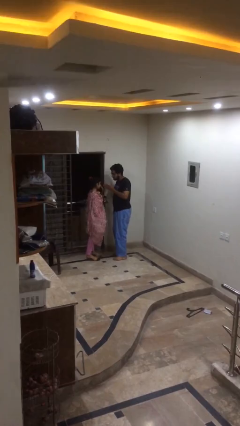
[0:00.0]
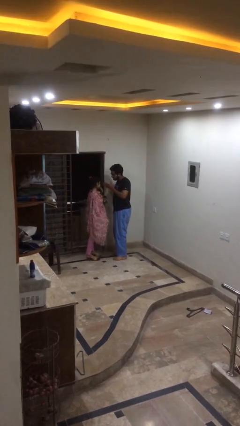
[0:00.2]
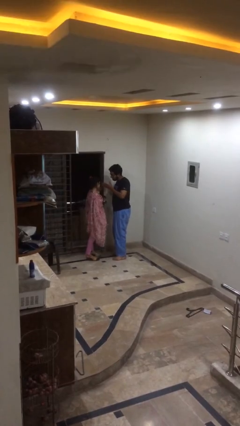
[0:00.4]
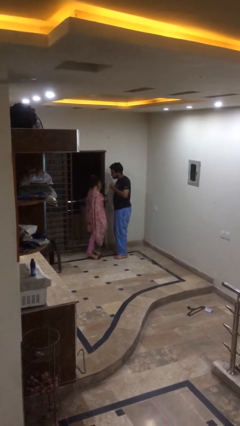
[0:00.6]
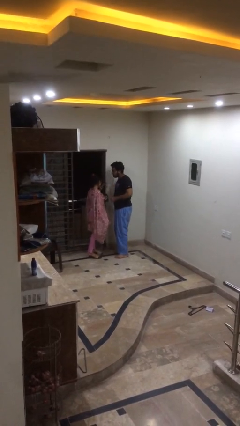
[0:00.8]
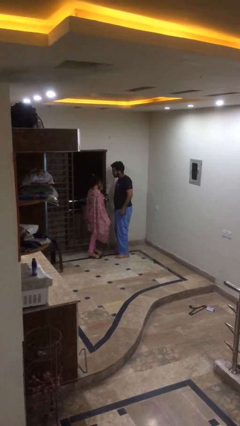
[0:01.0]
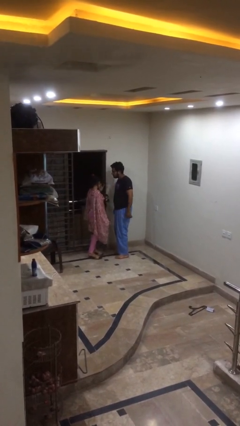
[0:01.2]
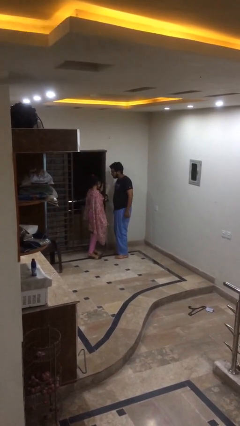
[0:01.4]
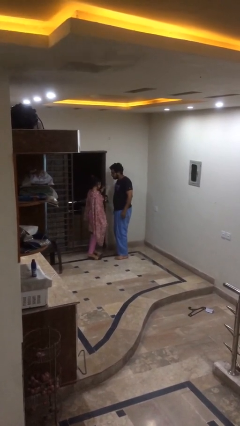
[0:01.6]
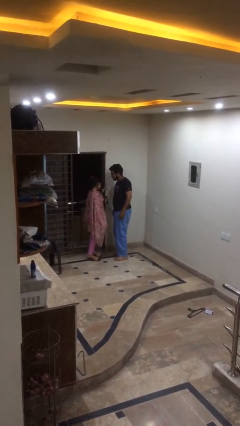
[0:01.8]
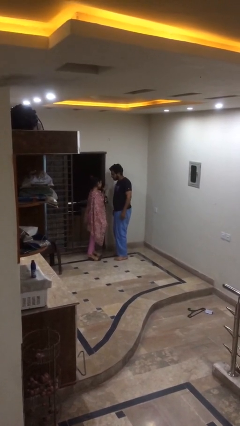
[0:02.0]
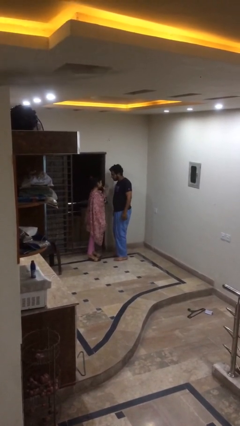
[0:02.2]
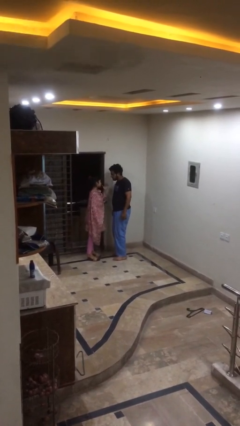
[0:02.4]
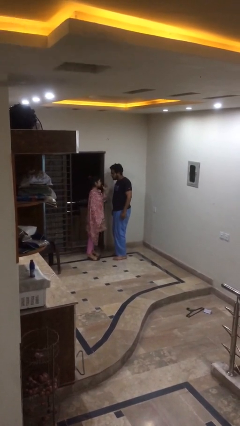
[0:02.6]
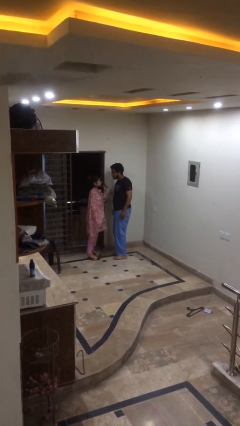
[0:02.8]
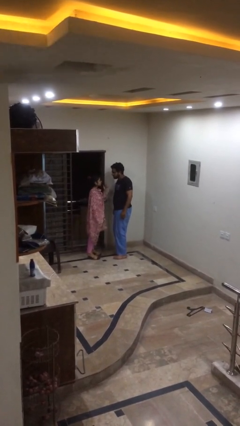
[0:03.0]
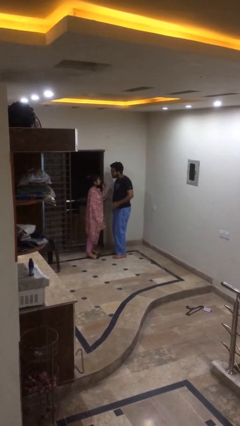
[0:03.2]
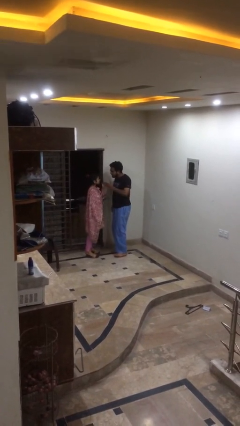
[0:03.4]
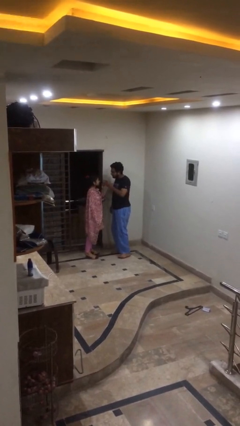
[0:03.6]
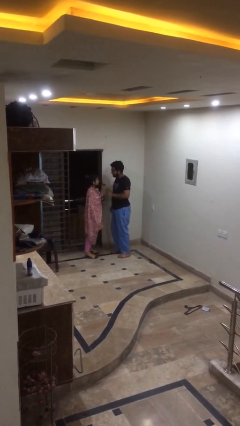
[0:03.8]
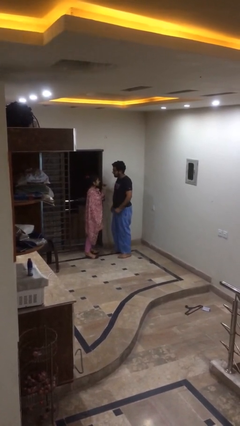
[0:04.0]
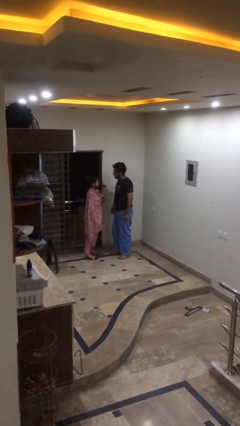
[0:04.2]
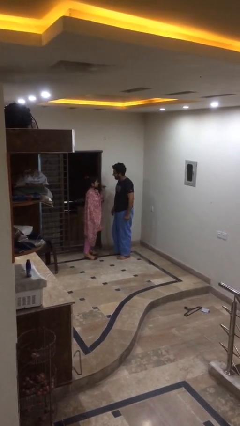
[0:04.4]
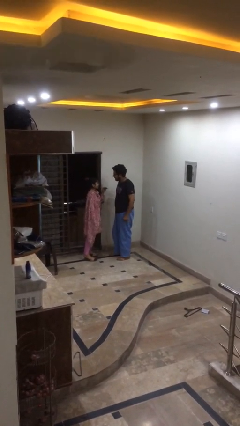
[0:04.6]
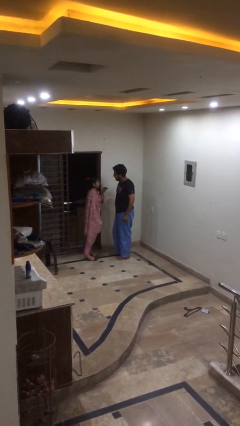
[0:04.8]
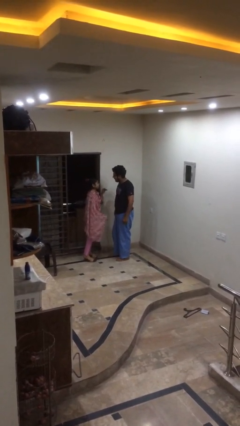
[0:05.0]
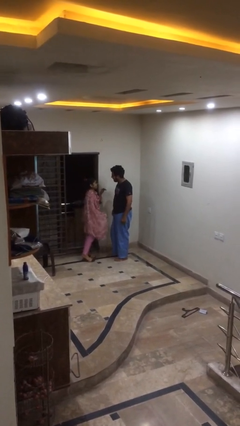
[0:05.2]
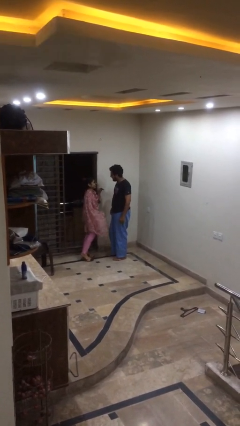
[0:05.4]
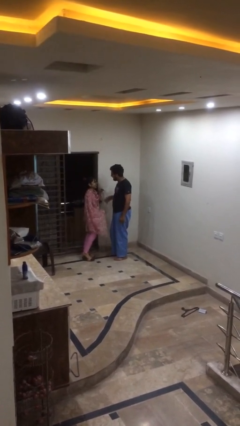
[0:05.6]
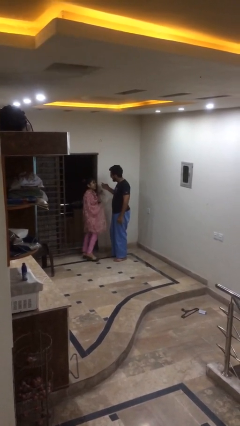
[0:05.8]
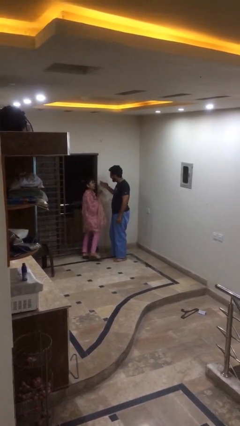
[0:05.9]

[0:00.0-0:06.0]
person talks to person

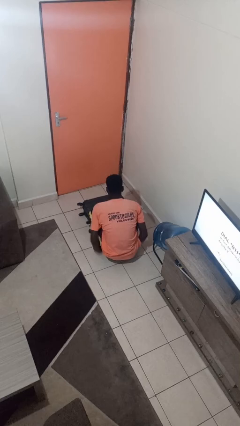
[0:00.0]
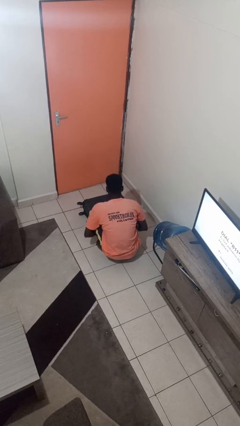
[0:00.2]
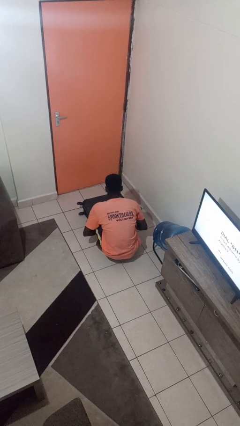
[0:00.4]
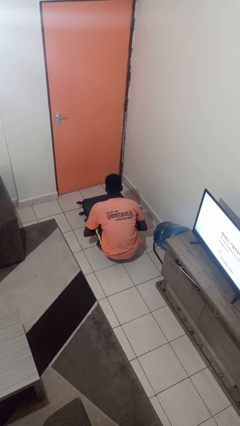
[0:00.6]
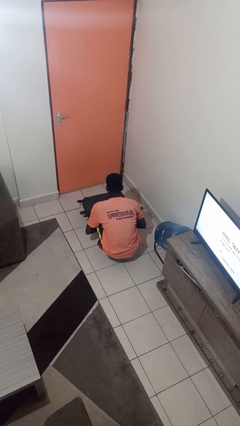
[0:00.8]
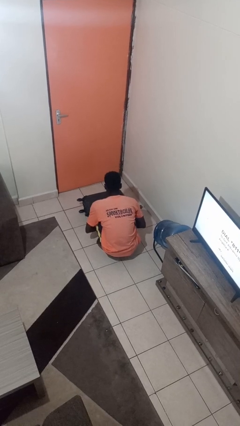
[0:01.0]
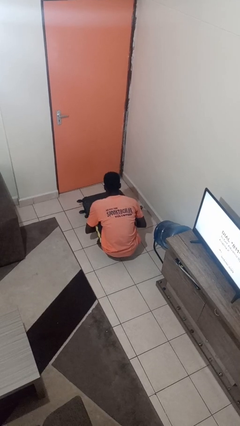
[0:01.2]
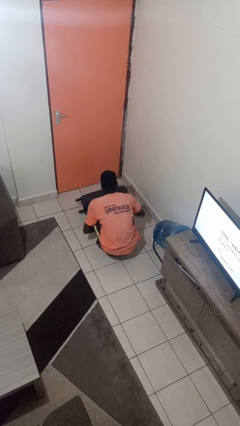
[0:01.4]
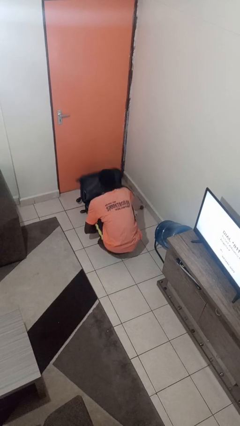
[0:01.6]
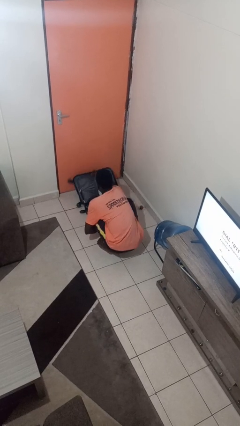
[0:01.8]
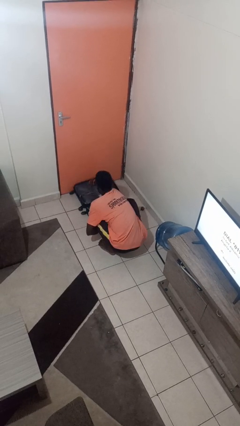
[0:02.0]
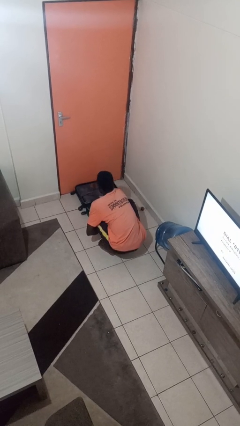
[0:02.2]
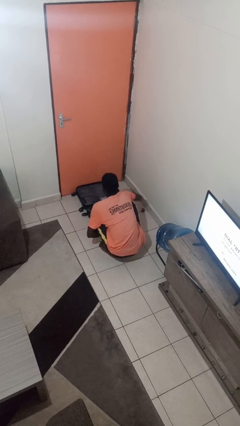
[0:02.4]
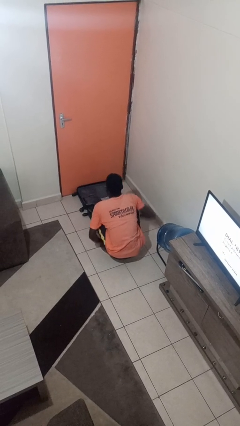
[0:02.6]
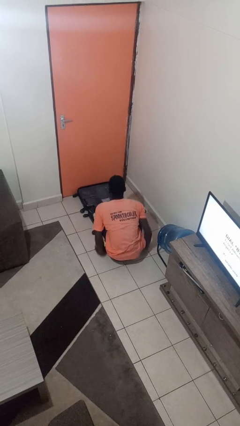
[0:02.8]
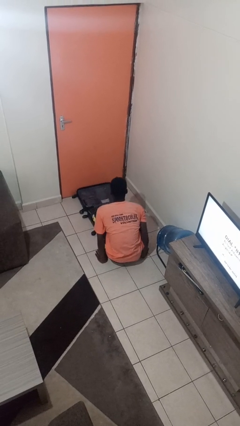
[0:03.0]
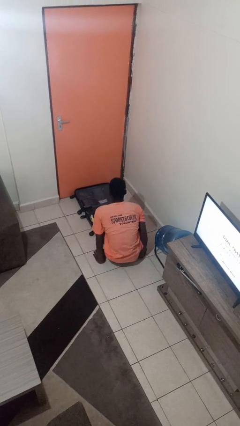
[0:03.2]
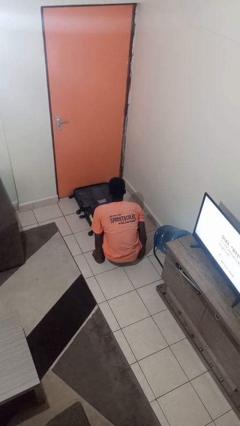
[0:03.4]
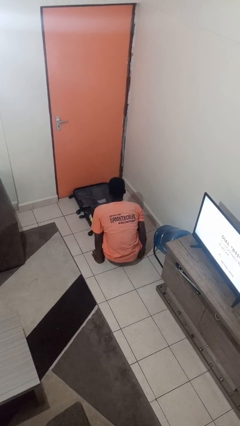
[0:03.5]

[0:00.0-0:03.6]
person opens suitcase

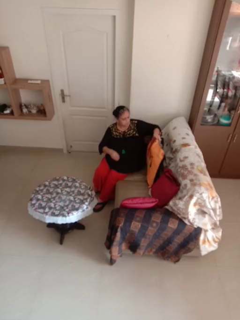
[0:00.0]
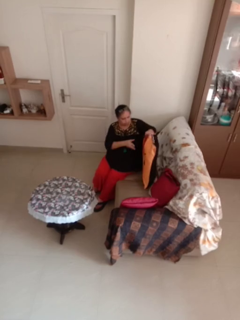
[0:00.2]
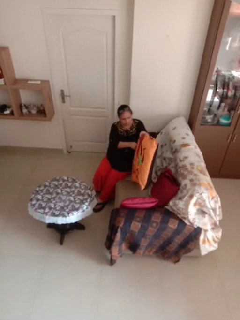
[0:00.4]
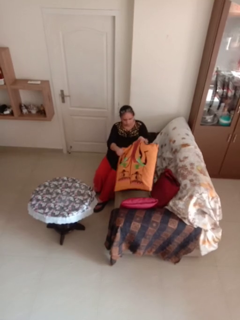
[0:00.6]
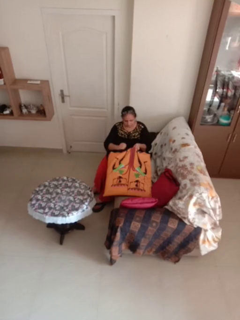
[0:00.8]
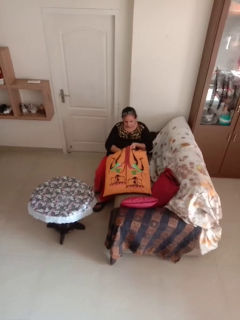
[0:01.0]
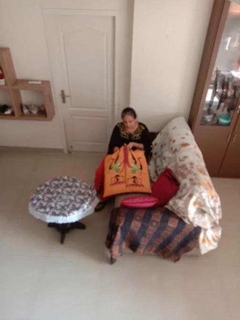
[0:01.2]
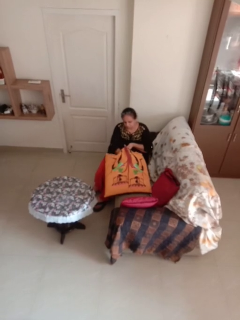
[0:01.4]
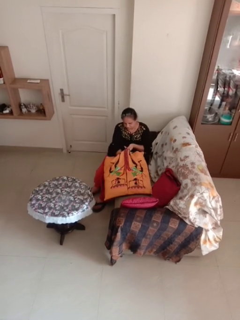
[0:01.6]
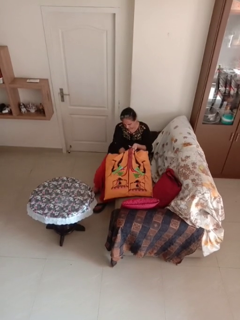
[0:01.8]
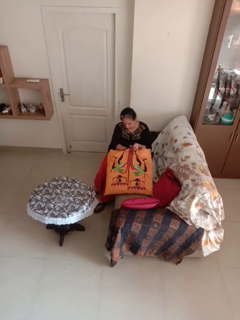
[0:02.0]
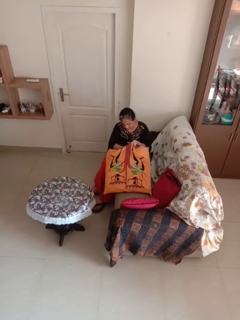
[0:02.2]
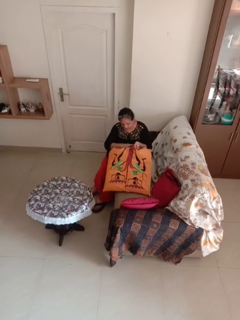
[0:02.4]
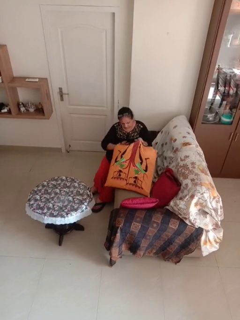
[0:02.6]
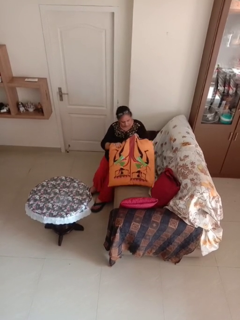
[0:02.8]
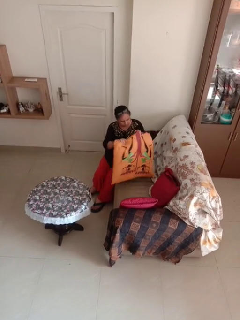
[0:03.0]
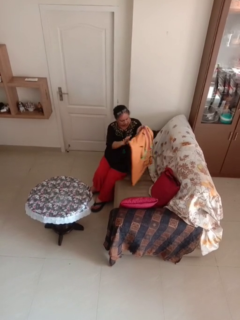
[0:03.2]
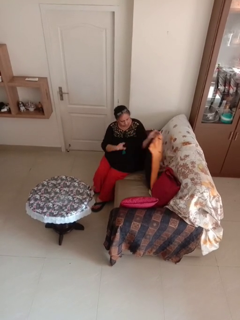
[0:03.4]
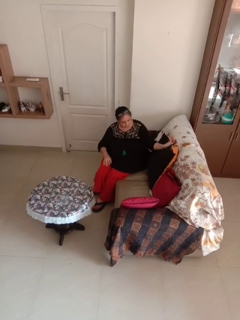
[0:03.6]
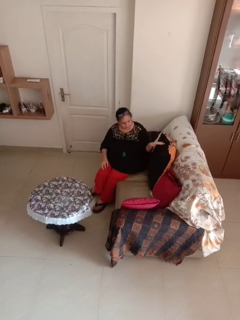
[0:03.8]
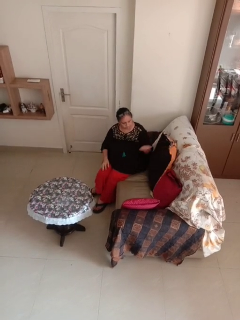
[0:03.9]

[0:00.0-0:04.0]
person searches in couch

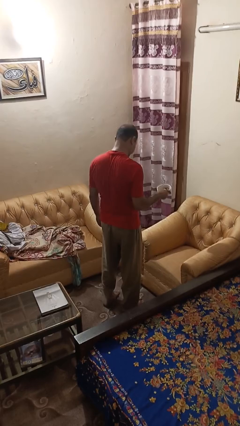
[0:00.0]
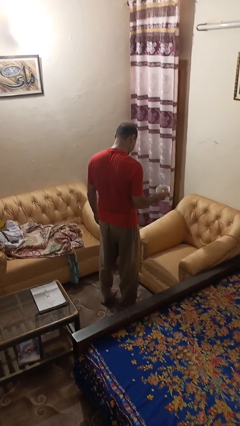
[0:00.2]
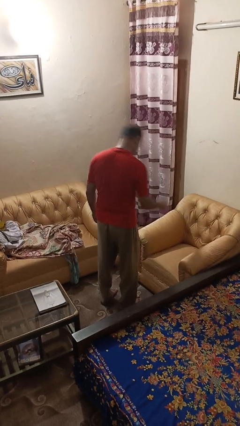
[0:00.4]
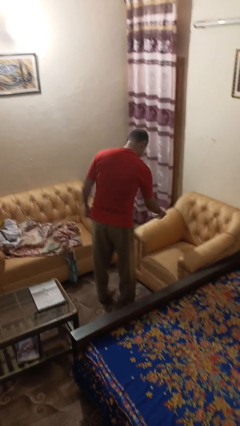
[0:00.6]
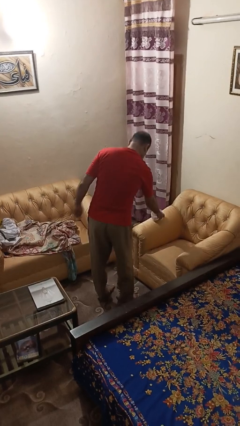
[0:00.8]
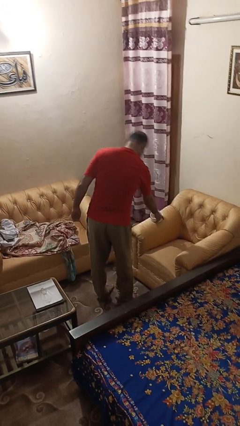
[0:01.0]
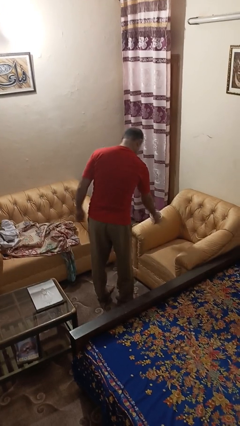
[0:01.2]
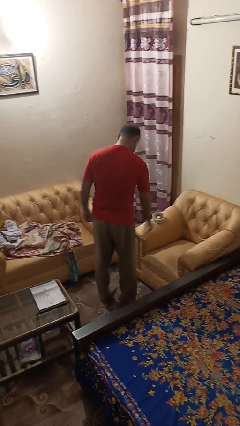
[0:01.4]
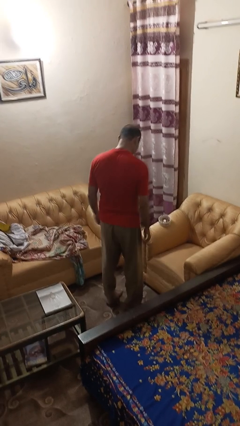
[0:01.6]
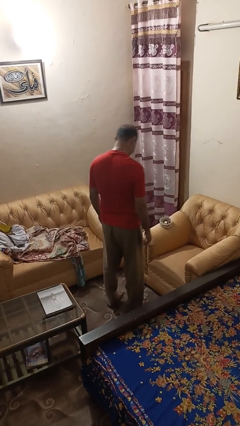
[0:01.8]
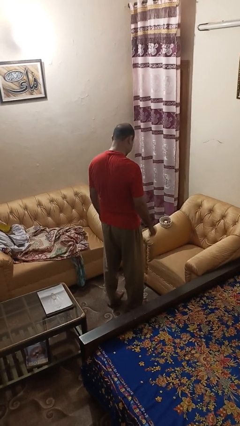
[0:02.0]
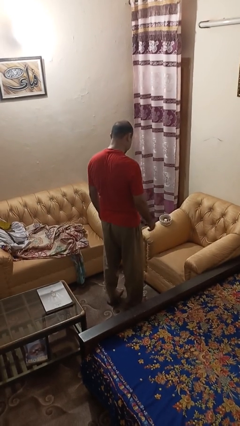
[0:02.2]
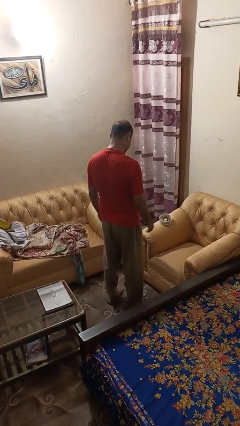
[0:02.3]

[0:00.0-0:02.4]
person puts down object on couch

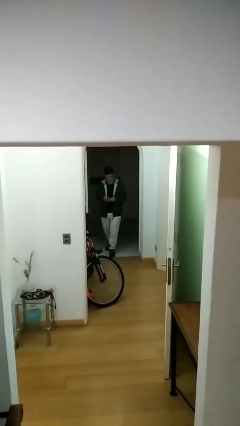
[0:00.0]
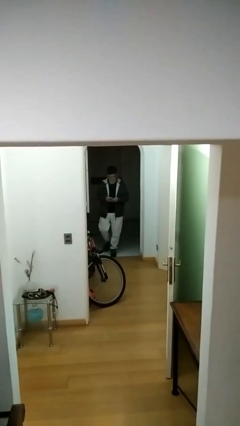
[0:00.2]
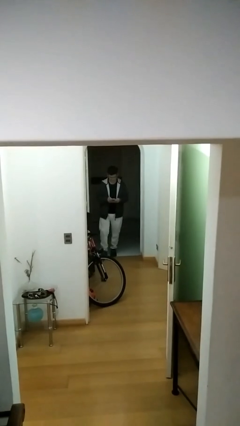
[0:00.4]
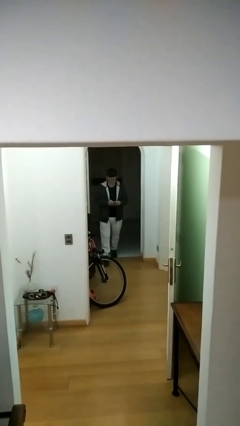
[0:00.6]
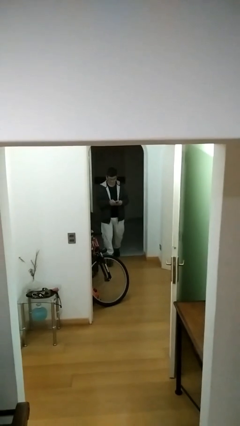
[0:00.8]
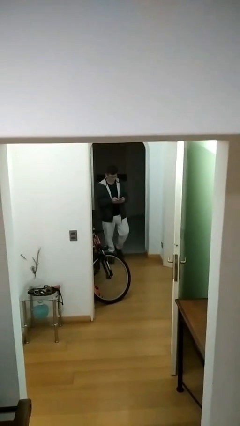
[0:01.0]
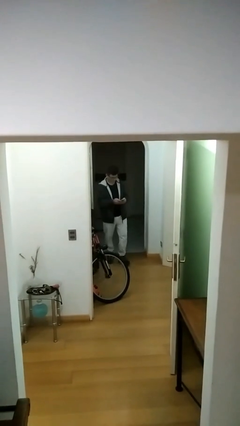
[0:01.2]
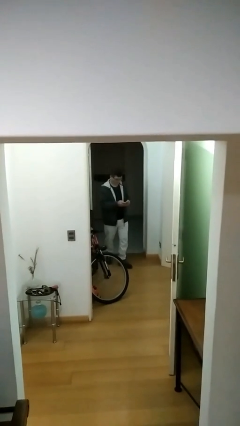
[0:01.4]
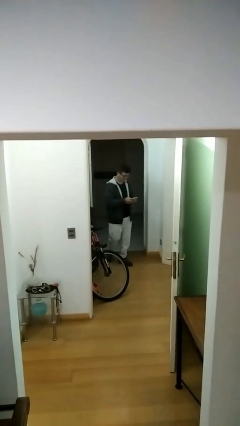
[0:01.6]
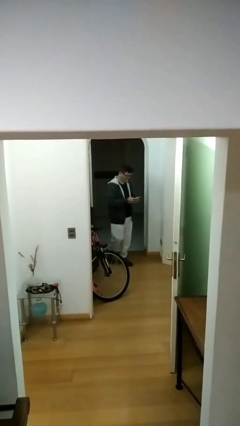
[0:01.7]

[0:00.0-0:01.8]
person enters scene through structure

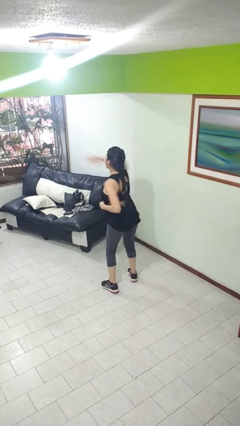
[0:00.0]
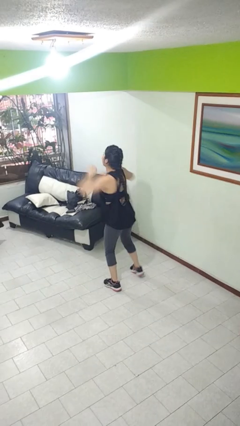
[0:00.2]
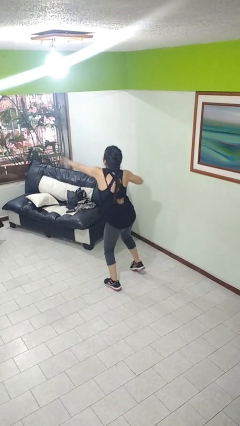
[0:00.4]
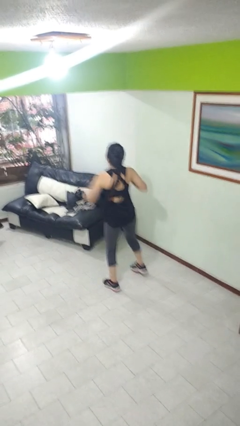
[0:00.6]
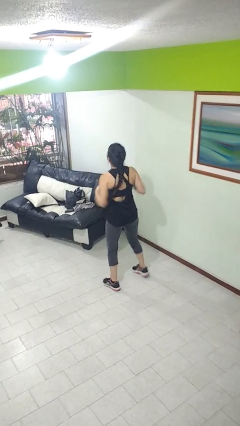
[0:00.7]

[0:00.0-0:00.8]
person karate chop
